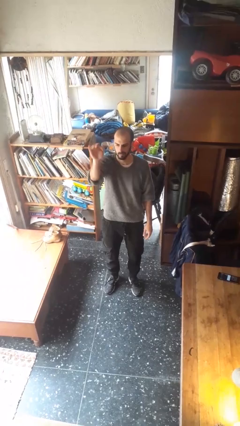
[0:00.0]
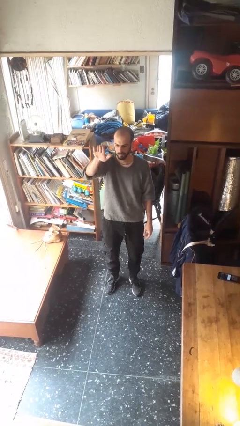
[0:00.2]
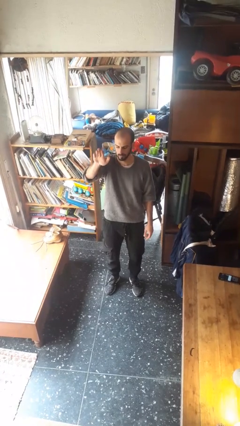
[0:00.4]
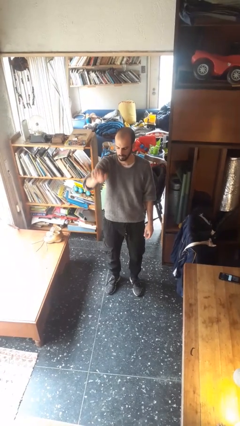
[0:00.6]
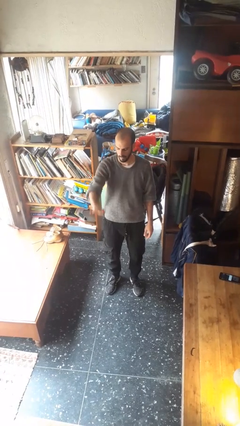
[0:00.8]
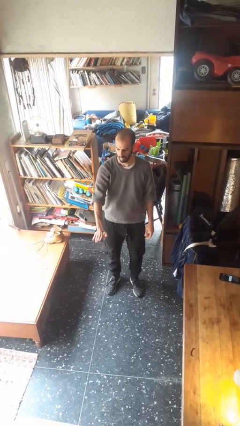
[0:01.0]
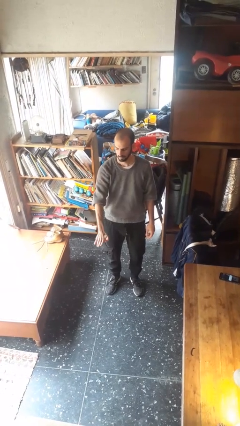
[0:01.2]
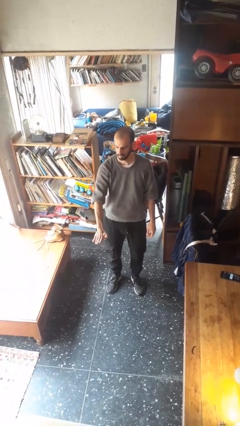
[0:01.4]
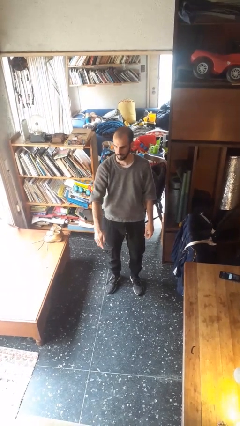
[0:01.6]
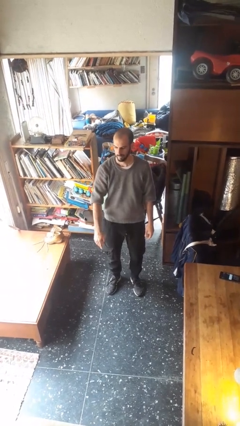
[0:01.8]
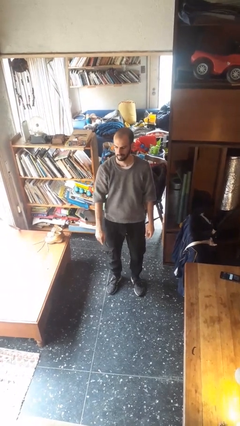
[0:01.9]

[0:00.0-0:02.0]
person gestures swipe down

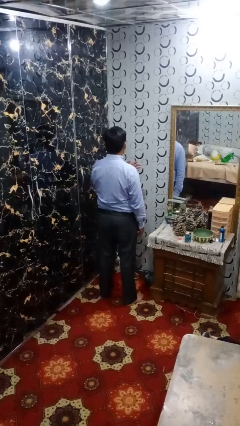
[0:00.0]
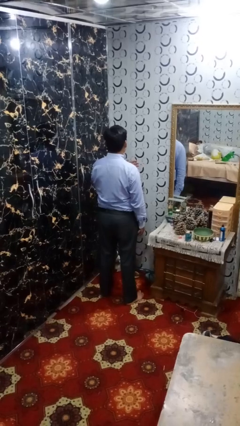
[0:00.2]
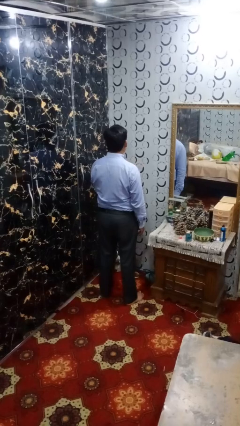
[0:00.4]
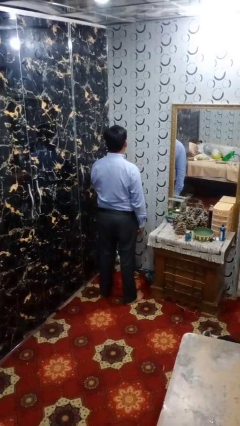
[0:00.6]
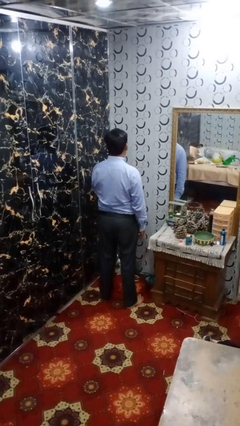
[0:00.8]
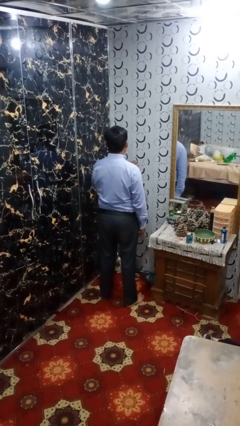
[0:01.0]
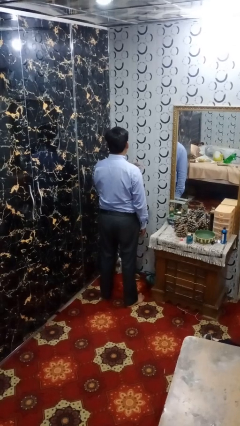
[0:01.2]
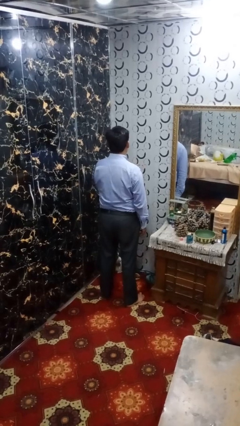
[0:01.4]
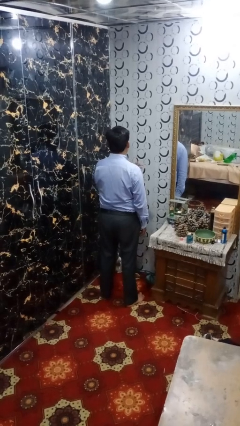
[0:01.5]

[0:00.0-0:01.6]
person drums on chest

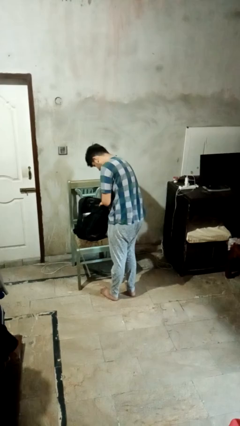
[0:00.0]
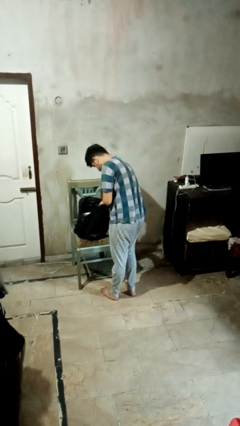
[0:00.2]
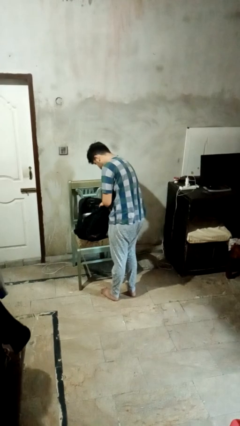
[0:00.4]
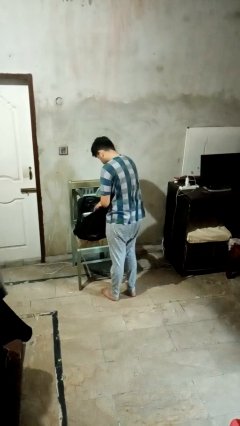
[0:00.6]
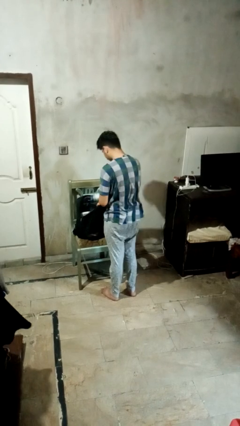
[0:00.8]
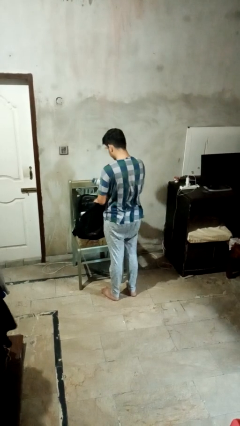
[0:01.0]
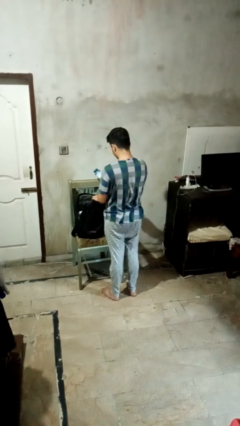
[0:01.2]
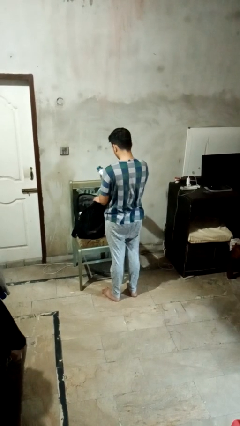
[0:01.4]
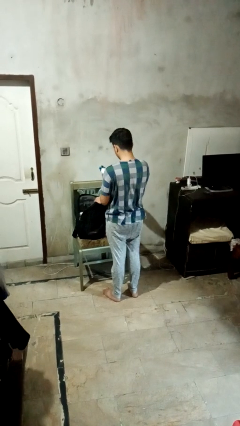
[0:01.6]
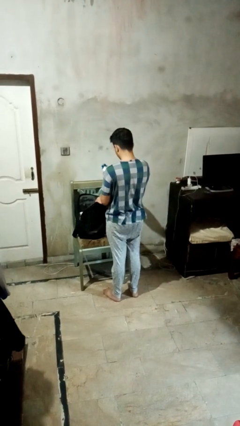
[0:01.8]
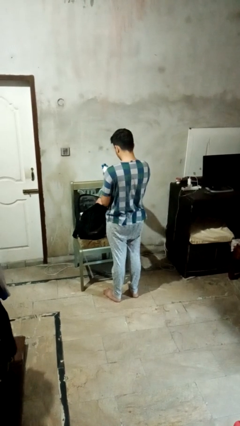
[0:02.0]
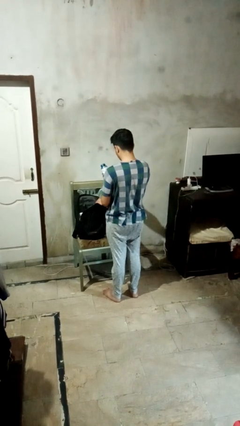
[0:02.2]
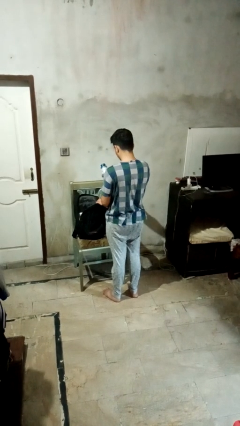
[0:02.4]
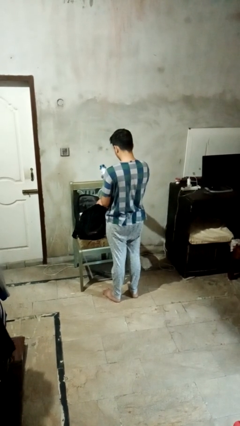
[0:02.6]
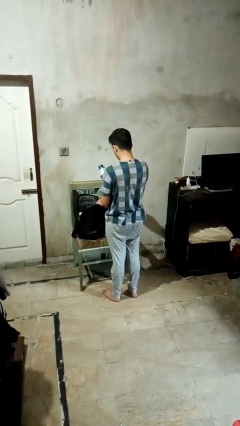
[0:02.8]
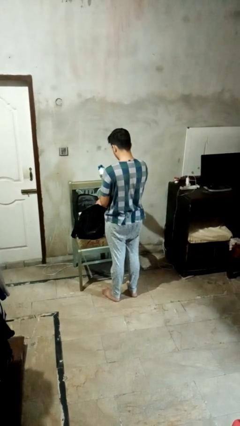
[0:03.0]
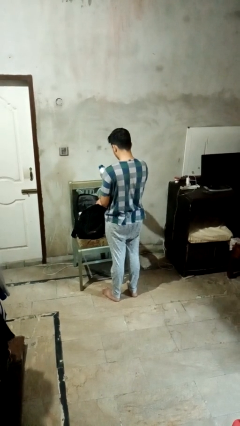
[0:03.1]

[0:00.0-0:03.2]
person takes object from backpack

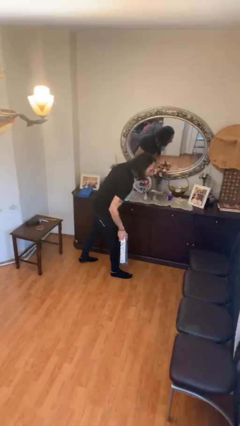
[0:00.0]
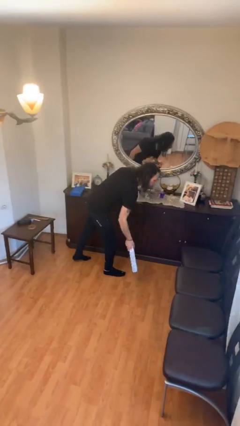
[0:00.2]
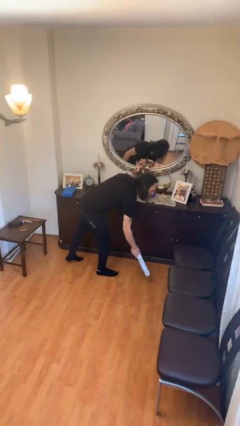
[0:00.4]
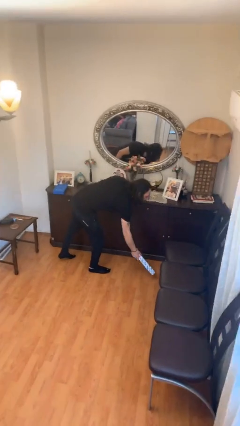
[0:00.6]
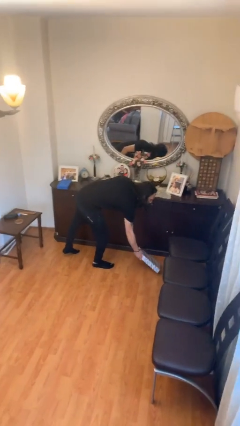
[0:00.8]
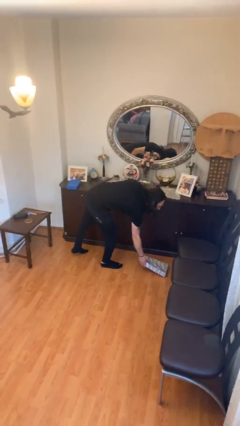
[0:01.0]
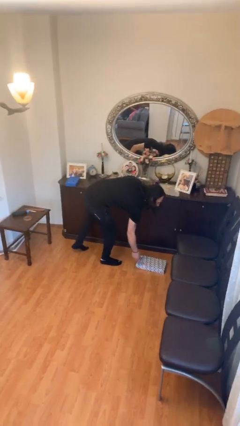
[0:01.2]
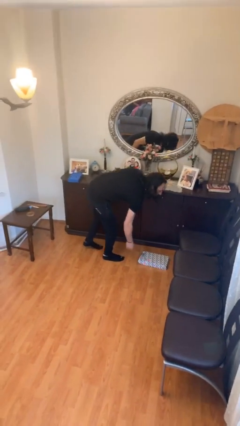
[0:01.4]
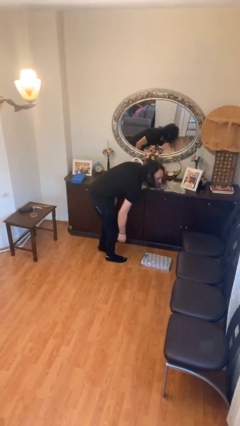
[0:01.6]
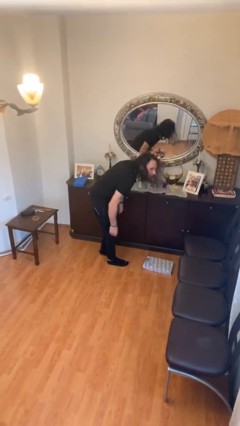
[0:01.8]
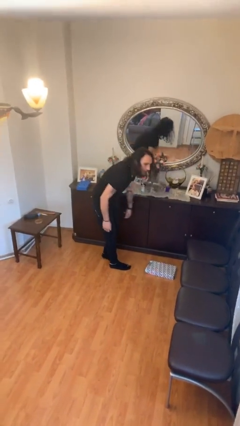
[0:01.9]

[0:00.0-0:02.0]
person puts down object on floor

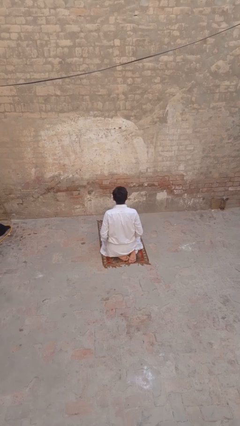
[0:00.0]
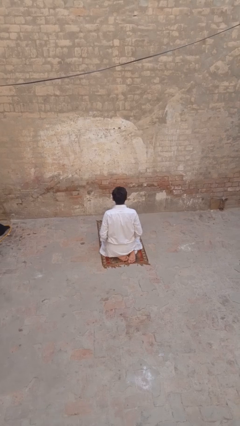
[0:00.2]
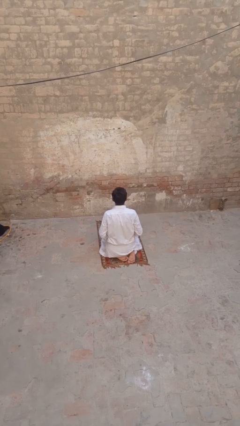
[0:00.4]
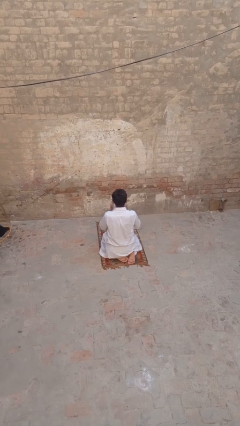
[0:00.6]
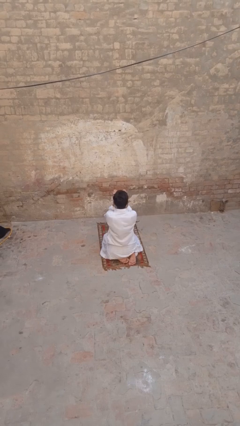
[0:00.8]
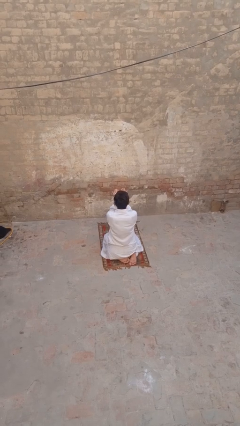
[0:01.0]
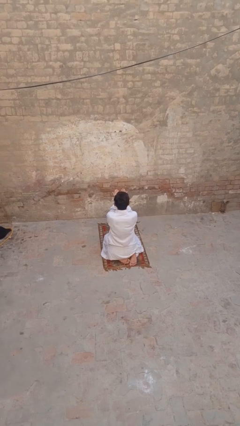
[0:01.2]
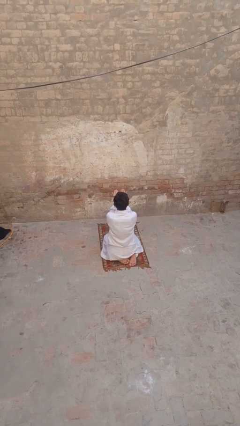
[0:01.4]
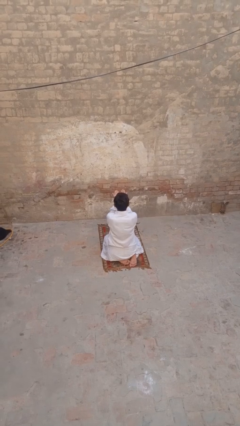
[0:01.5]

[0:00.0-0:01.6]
person prays

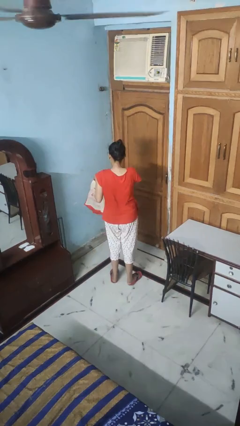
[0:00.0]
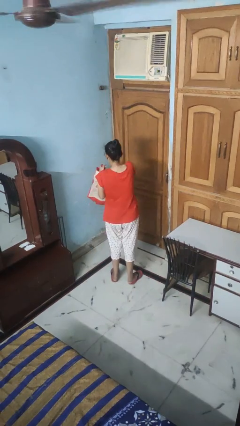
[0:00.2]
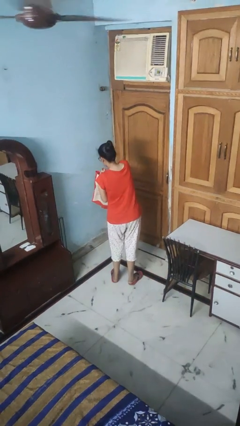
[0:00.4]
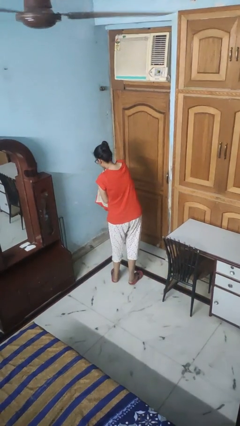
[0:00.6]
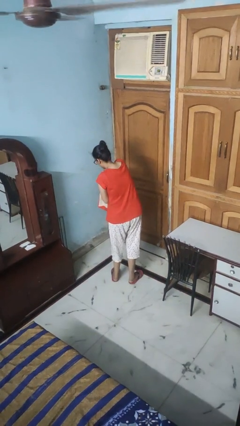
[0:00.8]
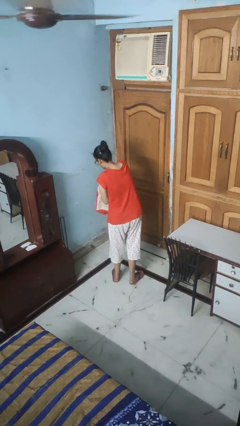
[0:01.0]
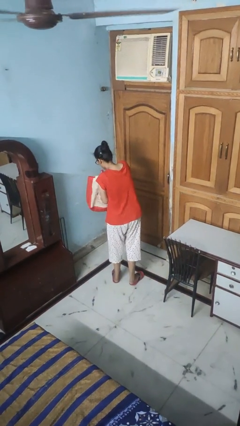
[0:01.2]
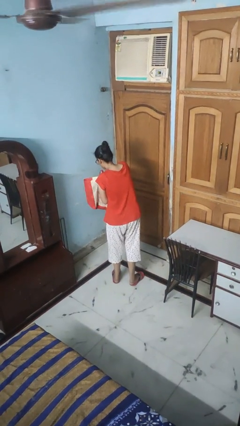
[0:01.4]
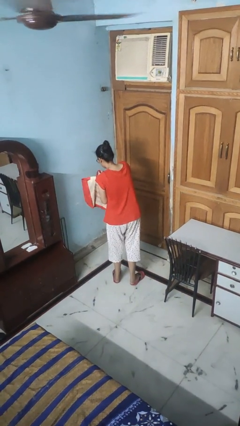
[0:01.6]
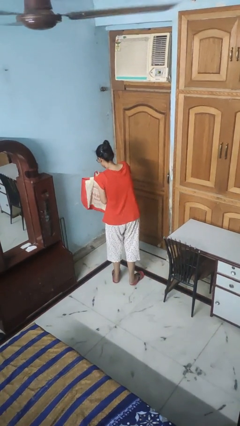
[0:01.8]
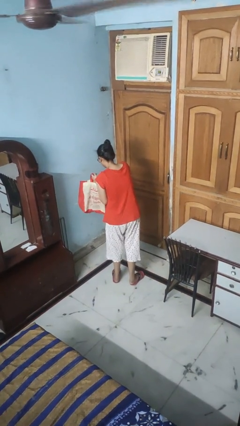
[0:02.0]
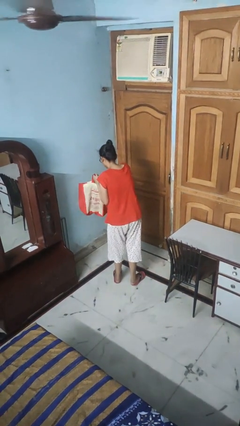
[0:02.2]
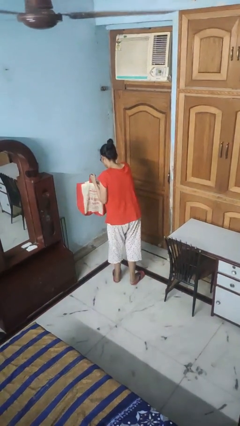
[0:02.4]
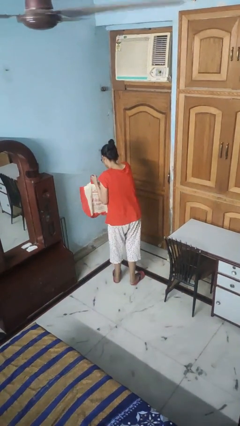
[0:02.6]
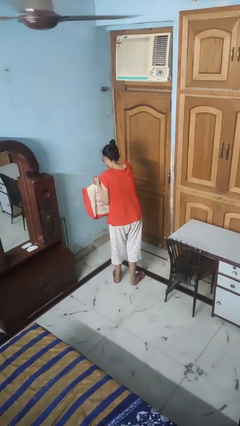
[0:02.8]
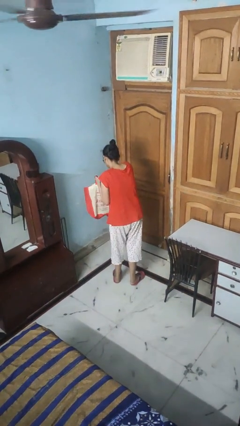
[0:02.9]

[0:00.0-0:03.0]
person searches in bag

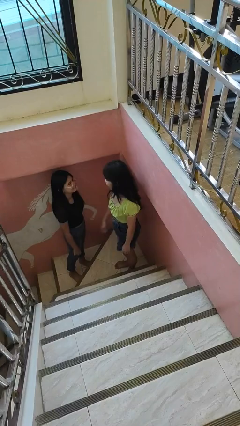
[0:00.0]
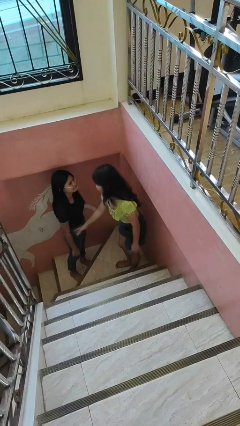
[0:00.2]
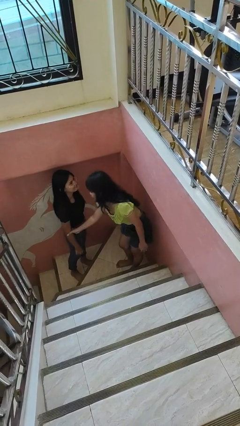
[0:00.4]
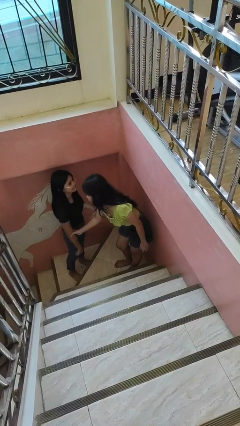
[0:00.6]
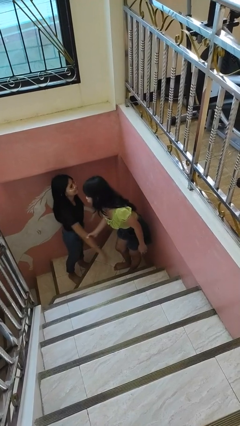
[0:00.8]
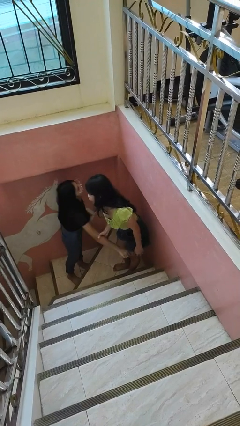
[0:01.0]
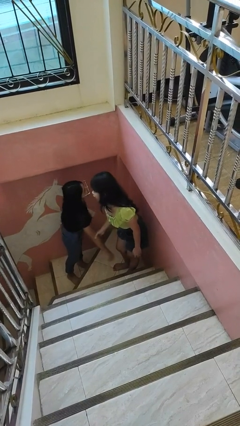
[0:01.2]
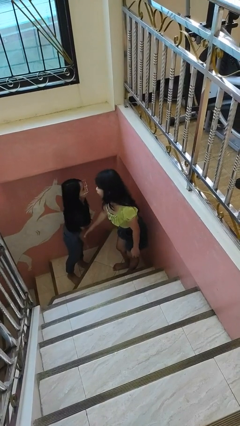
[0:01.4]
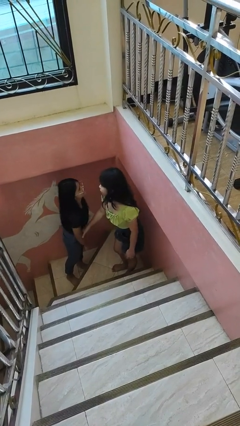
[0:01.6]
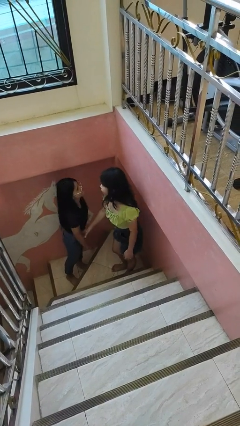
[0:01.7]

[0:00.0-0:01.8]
person grabs person by forearm

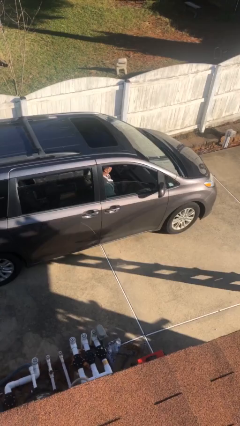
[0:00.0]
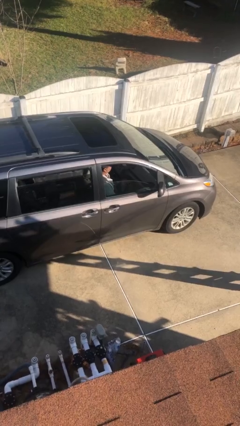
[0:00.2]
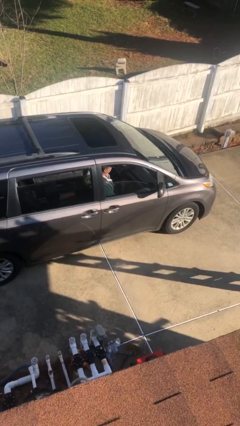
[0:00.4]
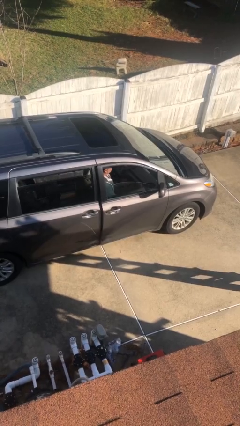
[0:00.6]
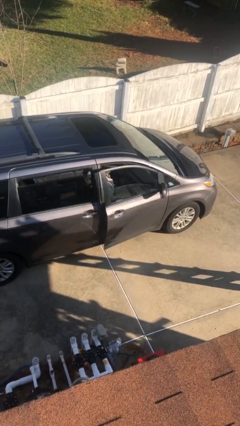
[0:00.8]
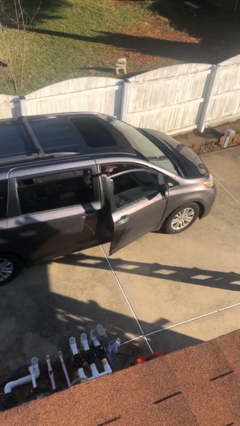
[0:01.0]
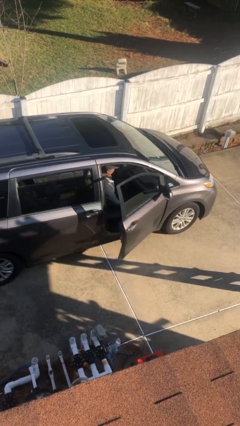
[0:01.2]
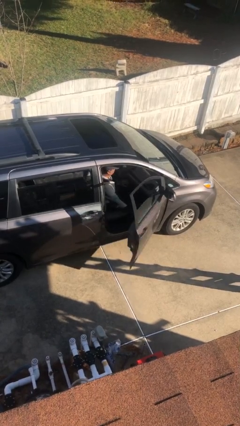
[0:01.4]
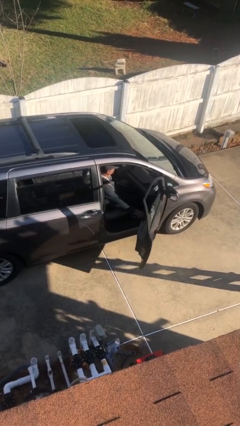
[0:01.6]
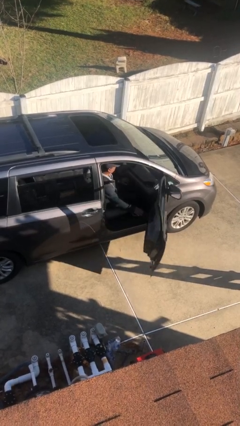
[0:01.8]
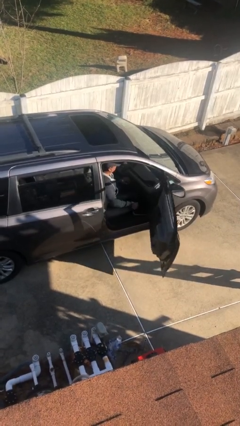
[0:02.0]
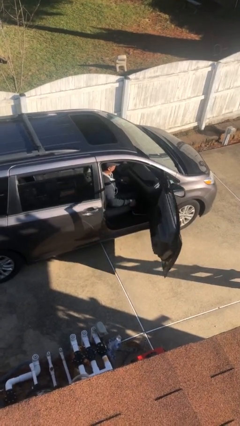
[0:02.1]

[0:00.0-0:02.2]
person opens car door
